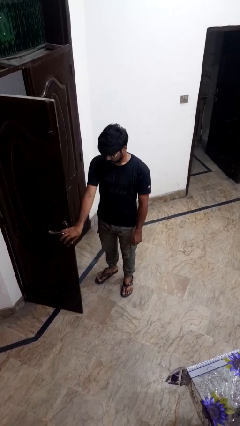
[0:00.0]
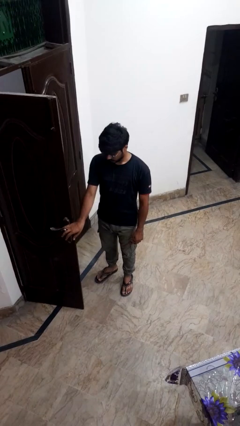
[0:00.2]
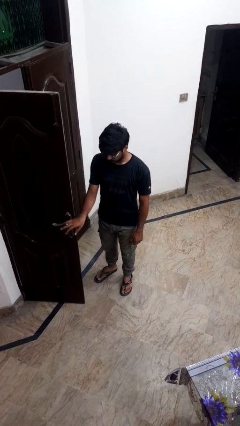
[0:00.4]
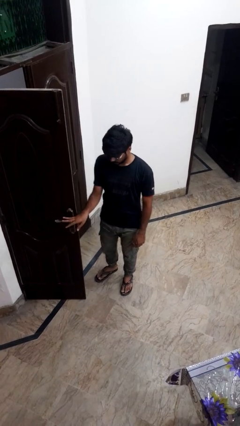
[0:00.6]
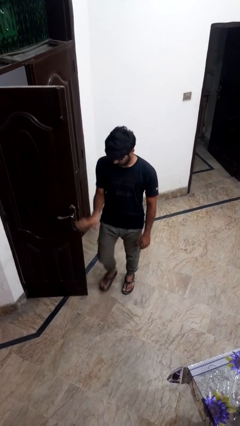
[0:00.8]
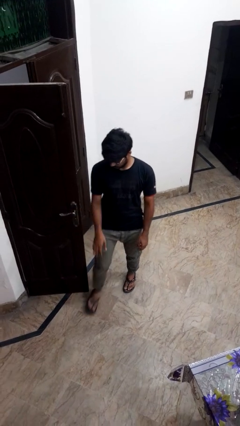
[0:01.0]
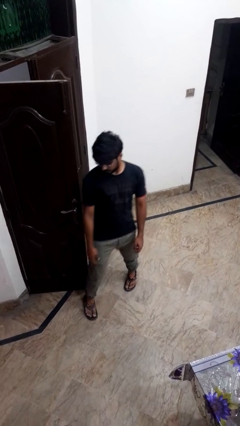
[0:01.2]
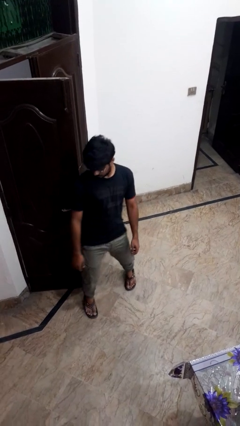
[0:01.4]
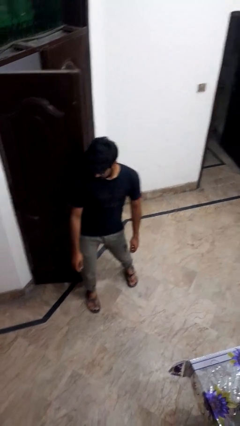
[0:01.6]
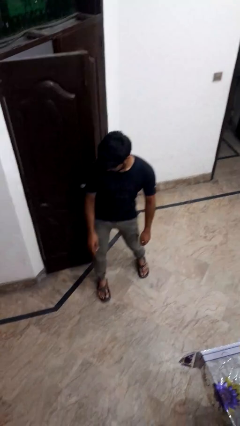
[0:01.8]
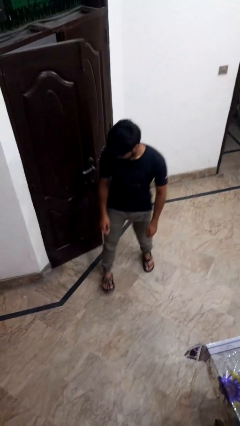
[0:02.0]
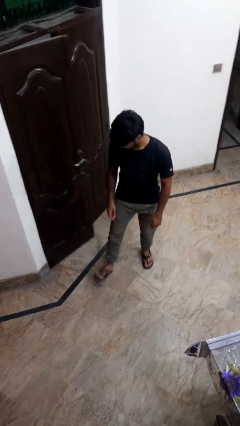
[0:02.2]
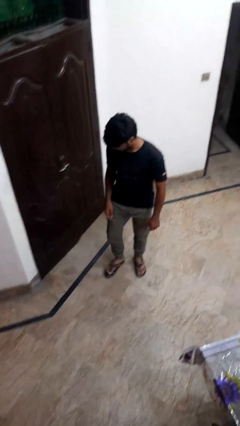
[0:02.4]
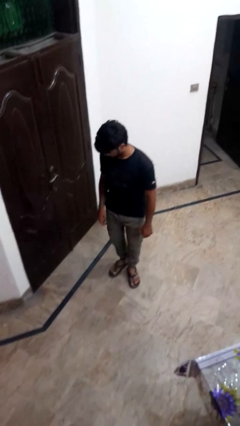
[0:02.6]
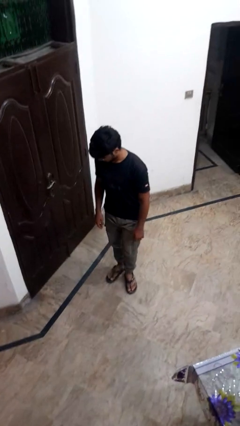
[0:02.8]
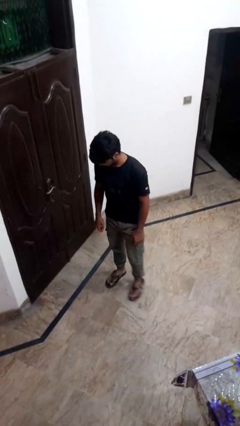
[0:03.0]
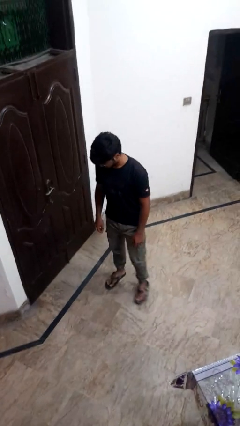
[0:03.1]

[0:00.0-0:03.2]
person closes door with hip

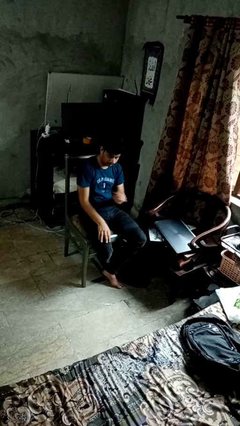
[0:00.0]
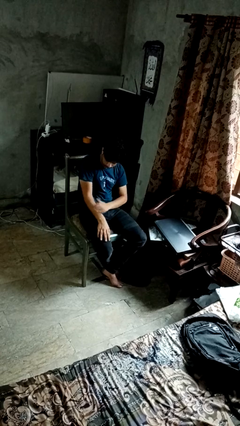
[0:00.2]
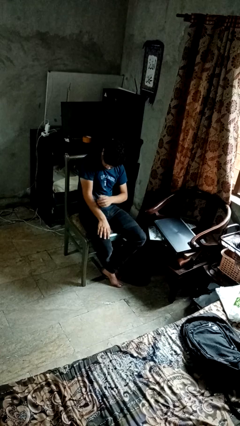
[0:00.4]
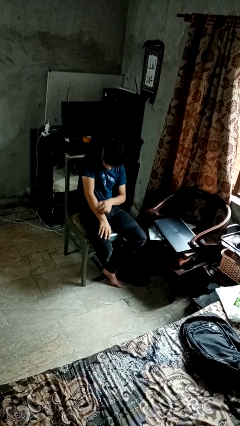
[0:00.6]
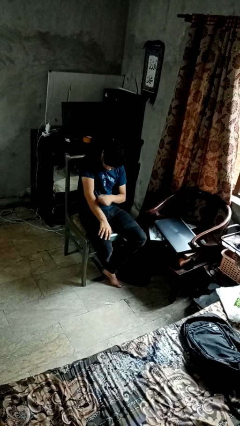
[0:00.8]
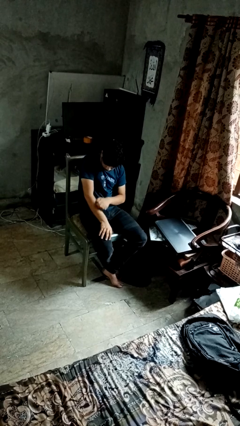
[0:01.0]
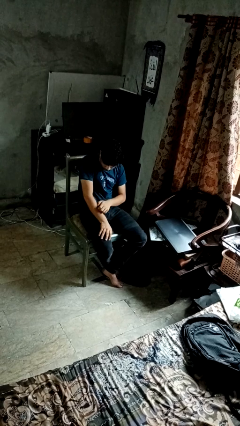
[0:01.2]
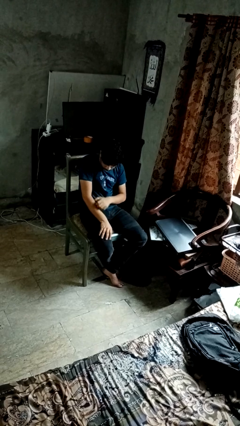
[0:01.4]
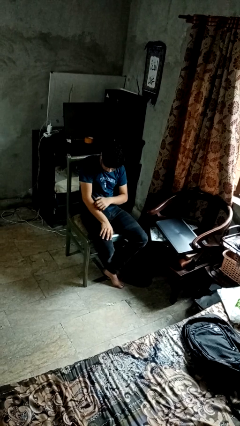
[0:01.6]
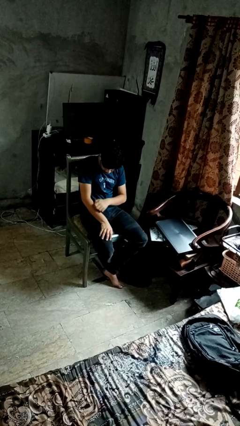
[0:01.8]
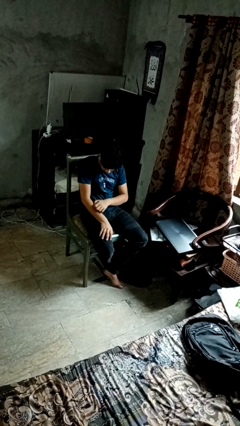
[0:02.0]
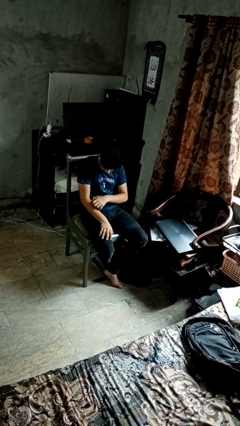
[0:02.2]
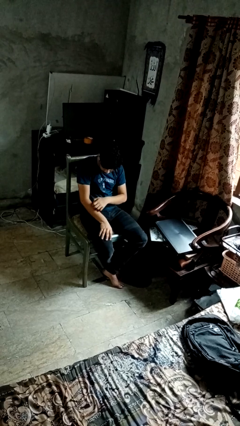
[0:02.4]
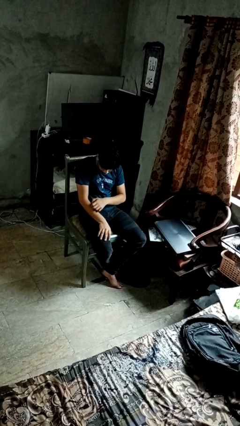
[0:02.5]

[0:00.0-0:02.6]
person swats bug

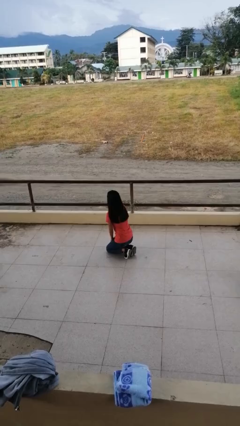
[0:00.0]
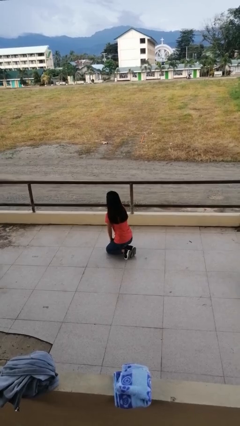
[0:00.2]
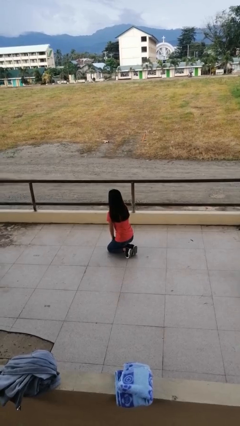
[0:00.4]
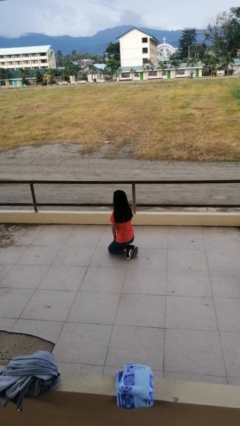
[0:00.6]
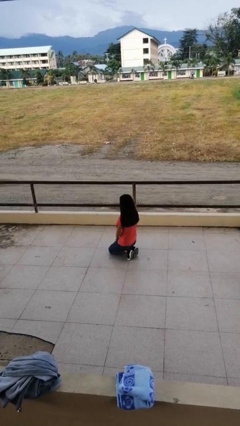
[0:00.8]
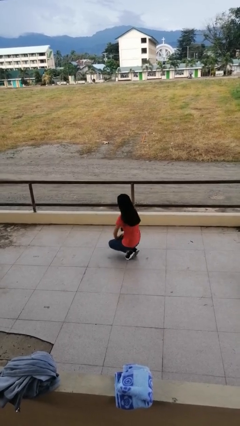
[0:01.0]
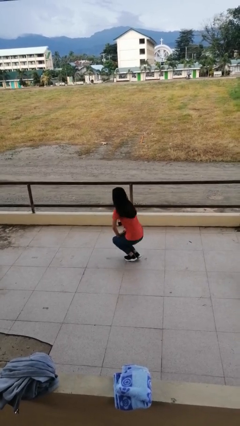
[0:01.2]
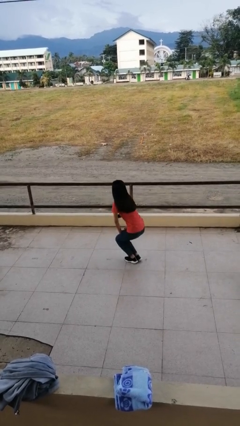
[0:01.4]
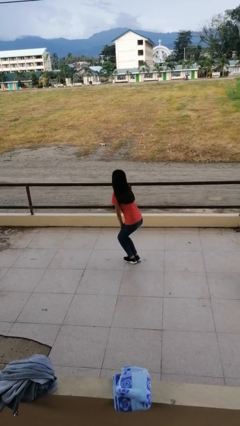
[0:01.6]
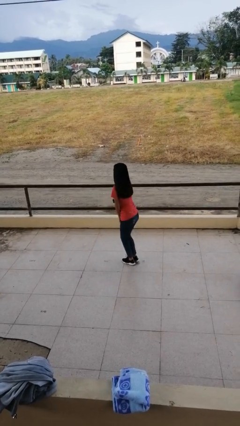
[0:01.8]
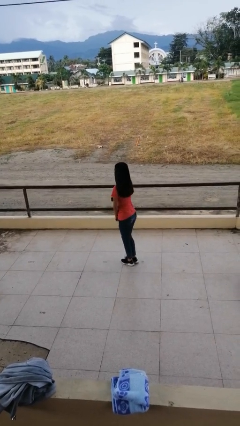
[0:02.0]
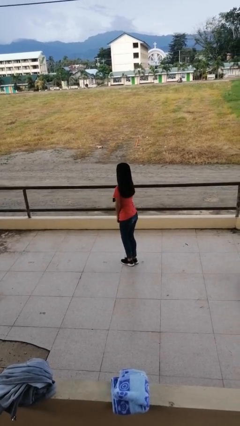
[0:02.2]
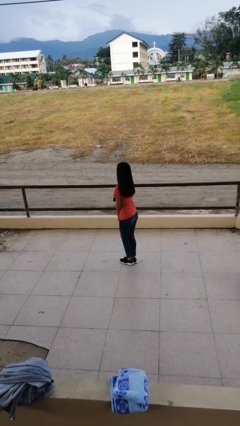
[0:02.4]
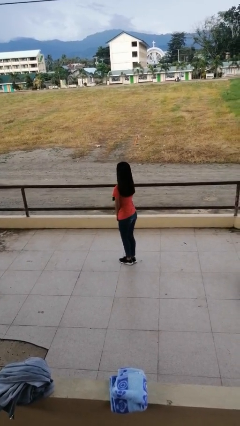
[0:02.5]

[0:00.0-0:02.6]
person stands up from floor

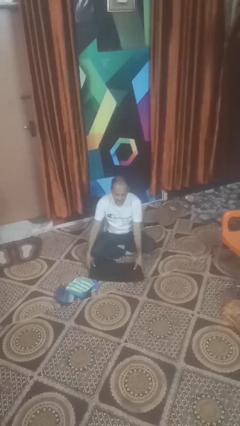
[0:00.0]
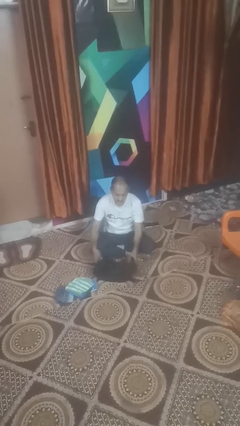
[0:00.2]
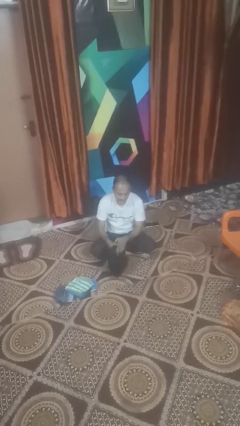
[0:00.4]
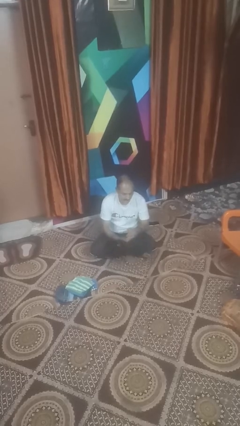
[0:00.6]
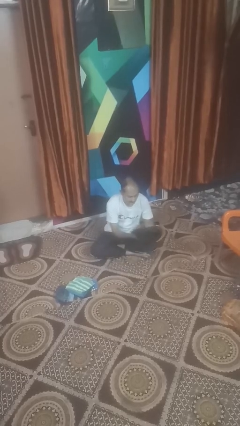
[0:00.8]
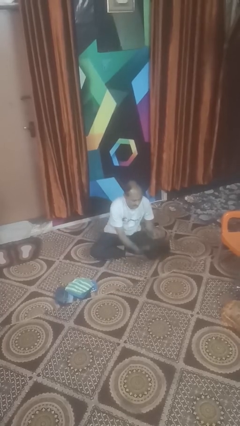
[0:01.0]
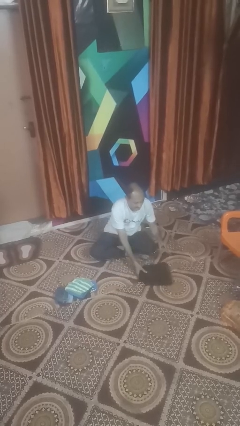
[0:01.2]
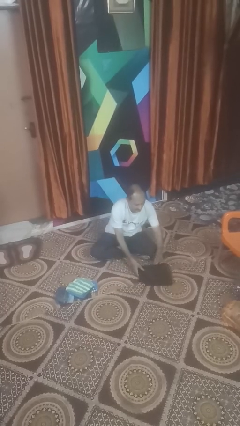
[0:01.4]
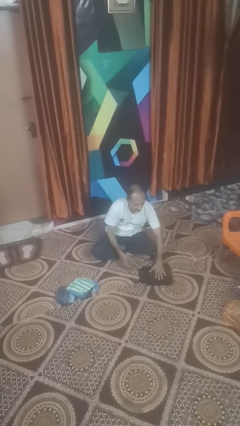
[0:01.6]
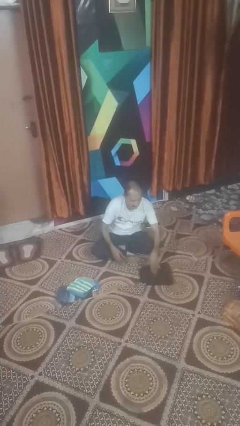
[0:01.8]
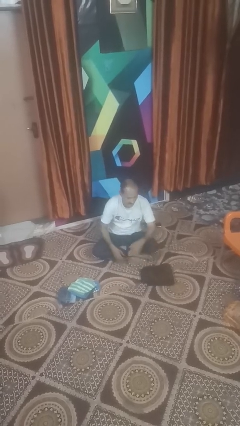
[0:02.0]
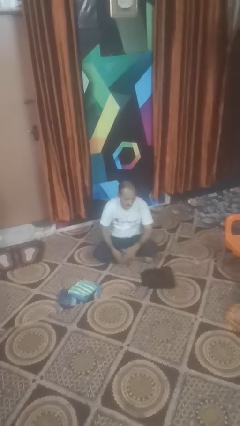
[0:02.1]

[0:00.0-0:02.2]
person folds pants

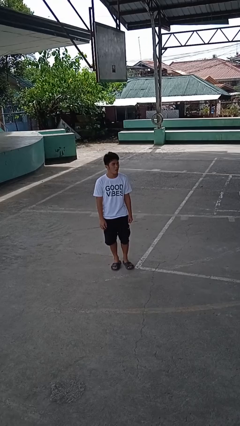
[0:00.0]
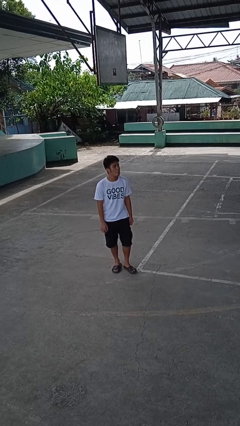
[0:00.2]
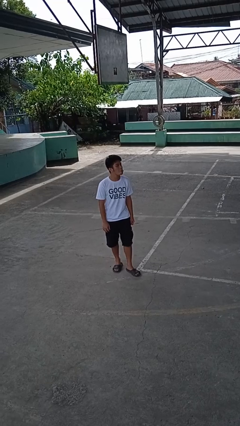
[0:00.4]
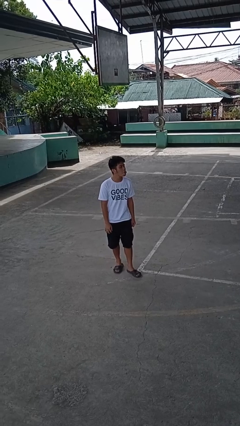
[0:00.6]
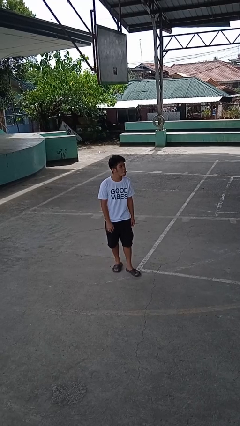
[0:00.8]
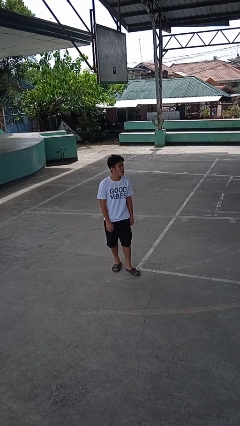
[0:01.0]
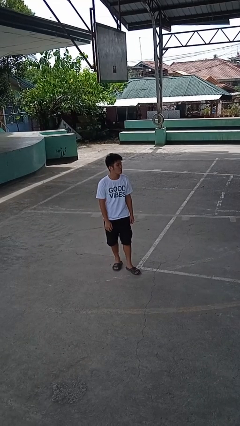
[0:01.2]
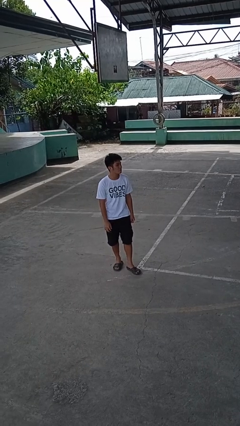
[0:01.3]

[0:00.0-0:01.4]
person sticks out tongue

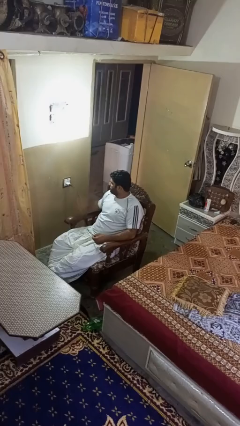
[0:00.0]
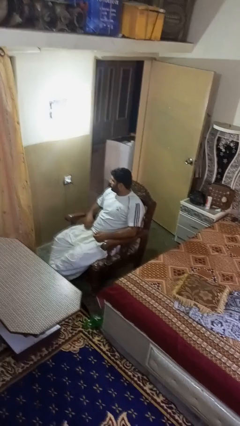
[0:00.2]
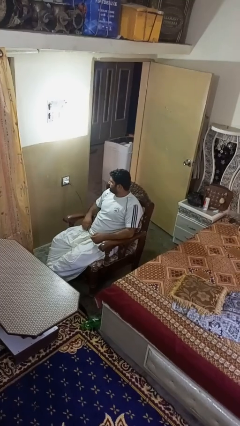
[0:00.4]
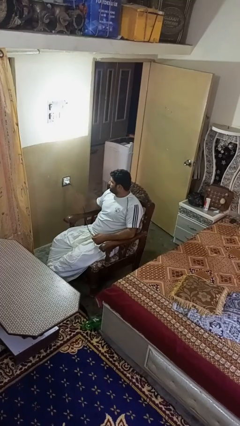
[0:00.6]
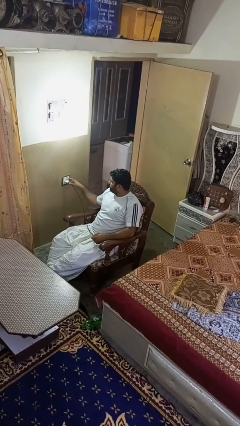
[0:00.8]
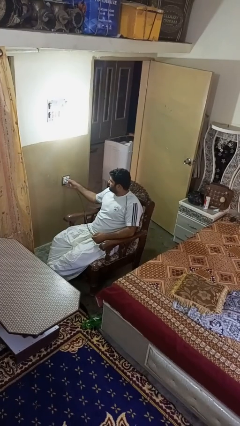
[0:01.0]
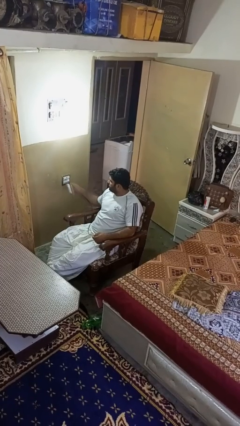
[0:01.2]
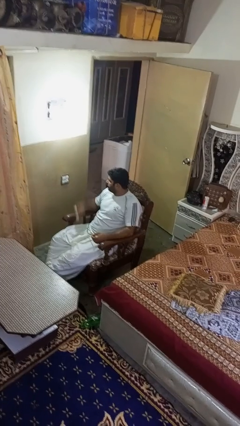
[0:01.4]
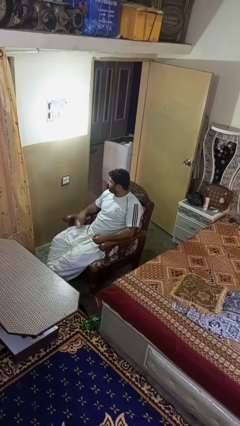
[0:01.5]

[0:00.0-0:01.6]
person unplugs from electrical socket

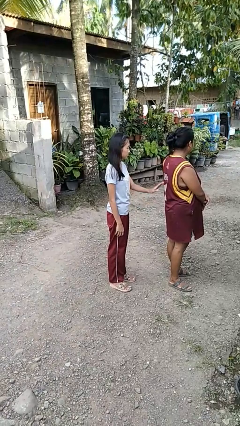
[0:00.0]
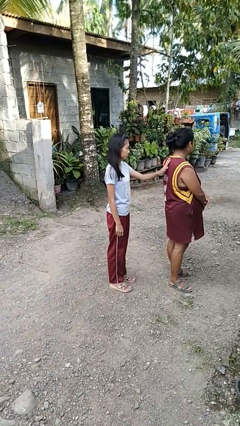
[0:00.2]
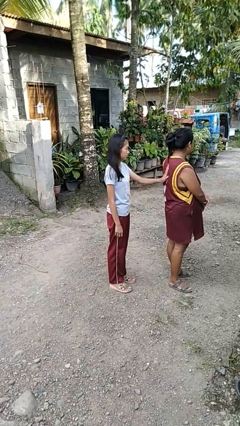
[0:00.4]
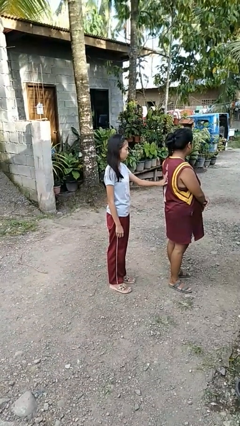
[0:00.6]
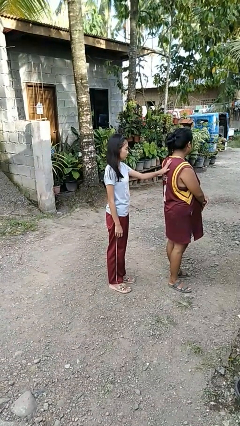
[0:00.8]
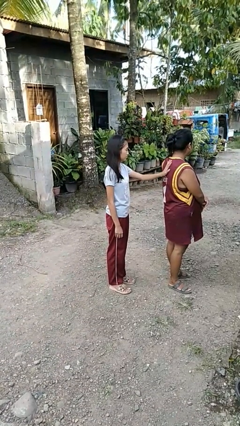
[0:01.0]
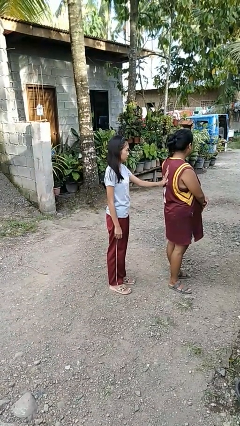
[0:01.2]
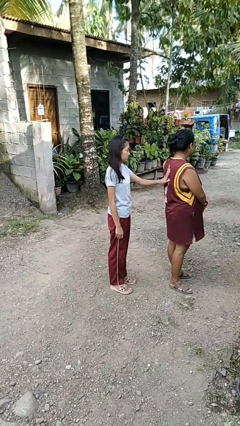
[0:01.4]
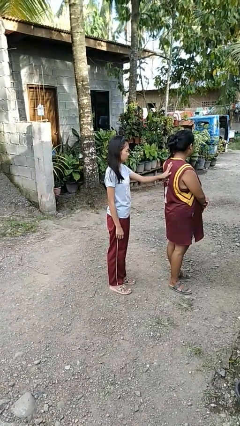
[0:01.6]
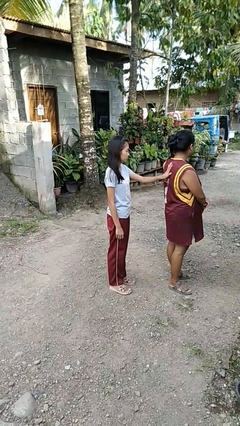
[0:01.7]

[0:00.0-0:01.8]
person touches back of person

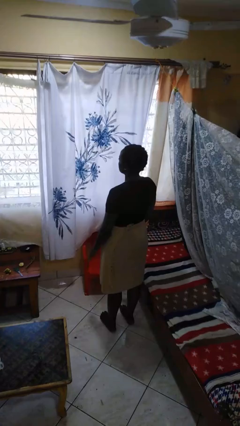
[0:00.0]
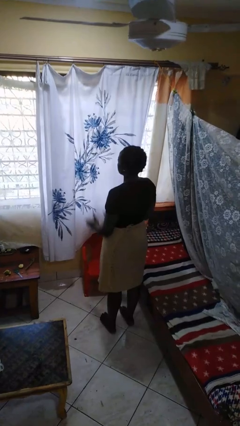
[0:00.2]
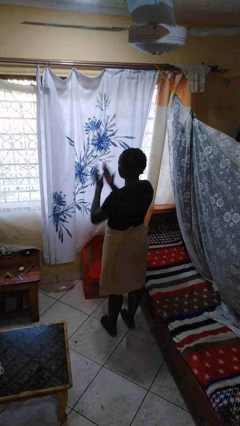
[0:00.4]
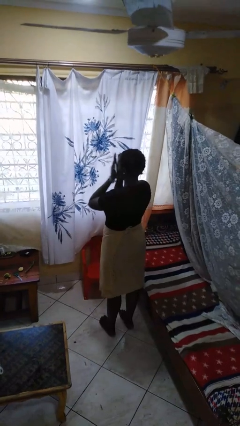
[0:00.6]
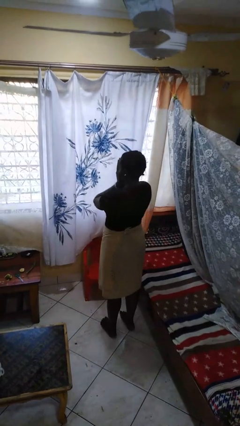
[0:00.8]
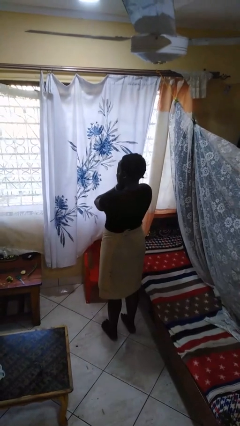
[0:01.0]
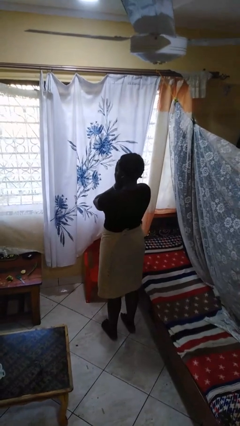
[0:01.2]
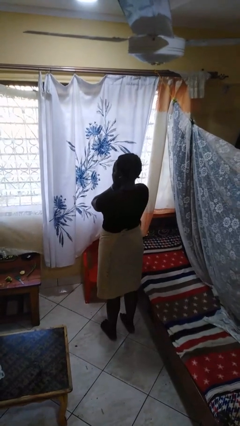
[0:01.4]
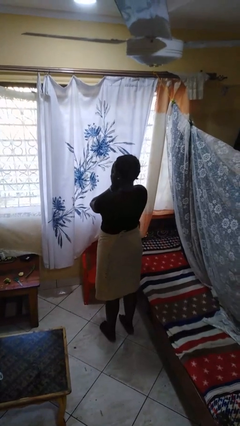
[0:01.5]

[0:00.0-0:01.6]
person covers face with hands
